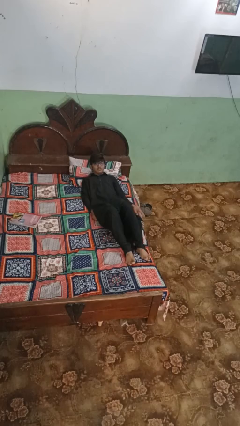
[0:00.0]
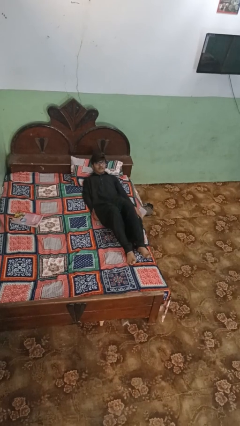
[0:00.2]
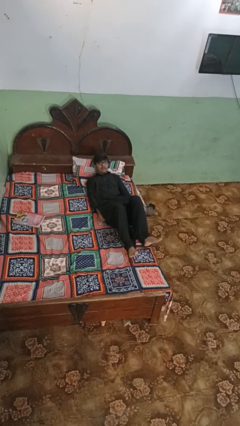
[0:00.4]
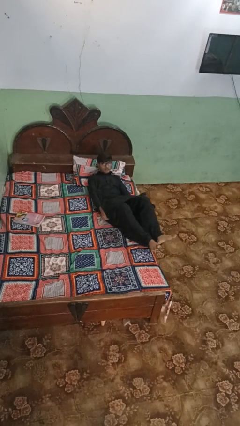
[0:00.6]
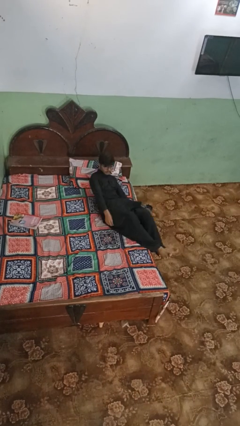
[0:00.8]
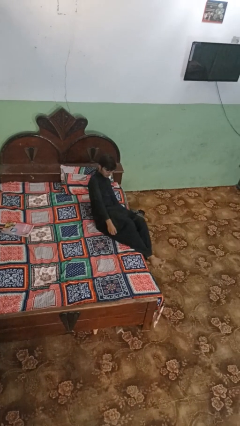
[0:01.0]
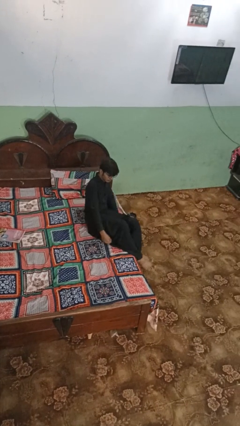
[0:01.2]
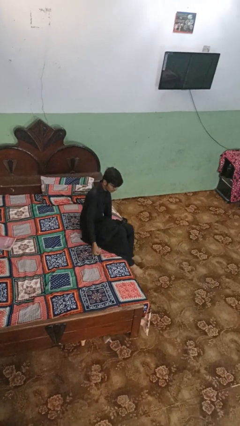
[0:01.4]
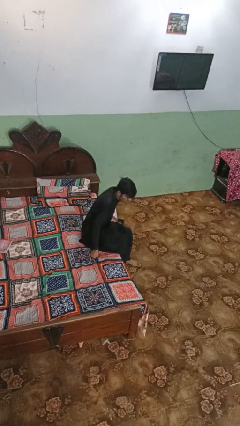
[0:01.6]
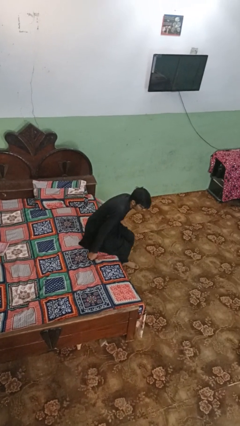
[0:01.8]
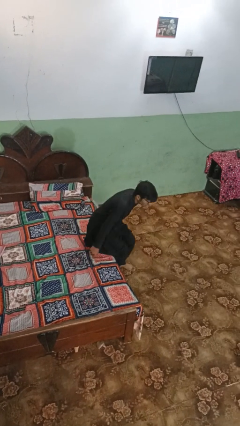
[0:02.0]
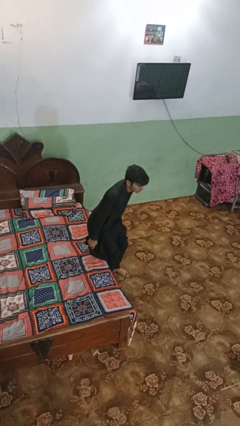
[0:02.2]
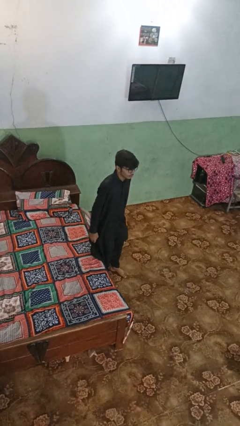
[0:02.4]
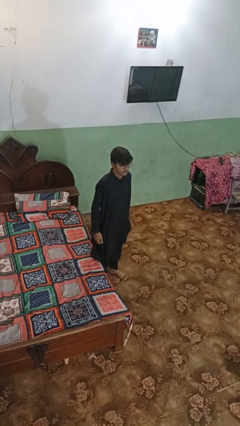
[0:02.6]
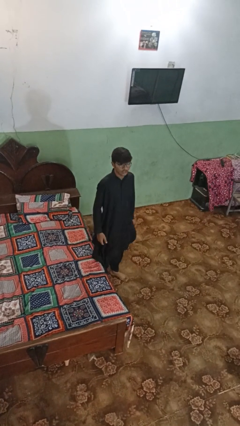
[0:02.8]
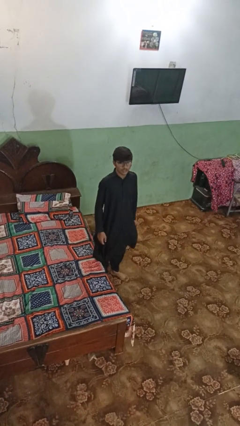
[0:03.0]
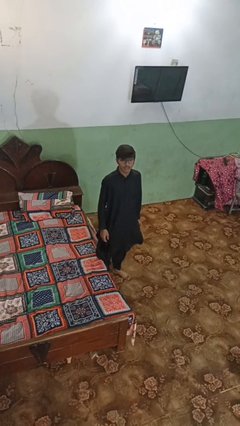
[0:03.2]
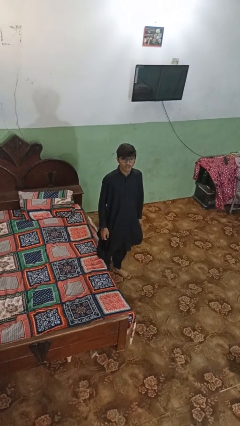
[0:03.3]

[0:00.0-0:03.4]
person stands up

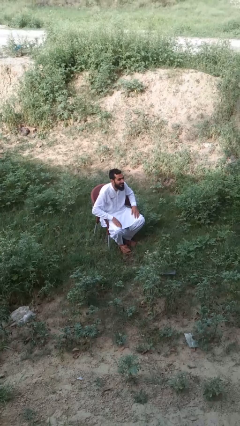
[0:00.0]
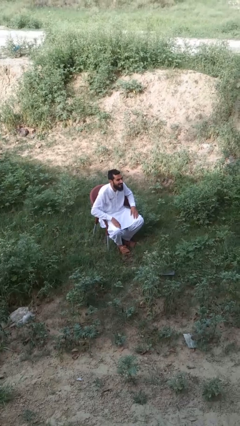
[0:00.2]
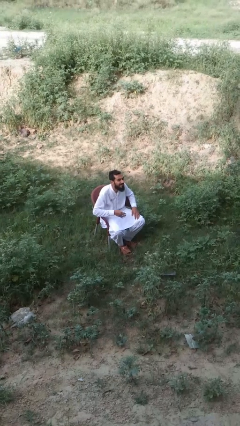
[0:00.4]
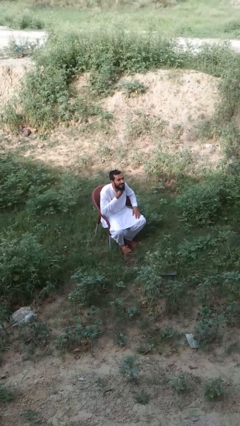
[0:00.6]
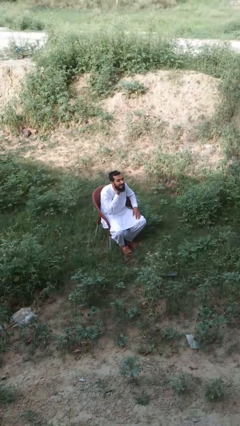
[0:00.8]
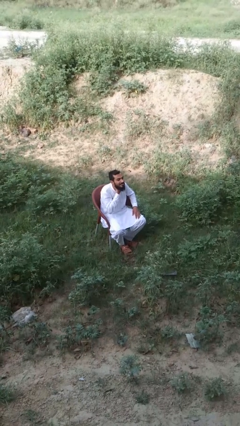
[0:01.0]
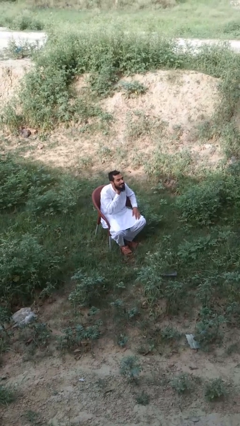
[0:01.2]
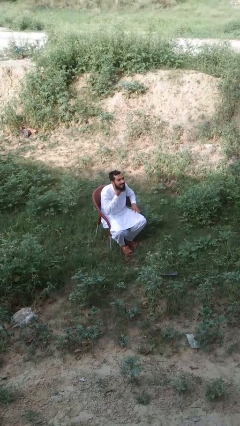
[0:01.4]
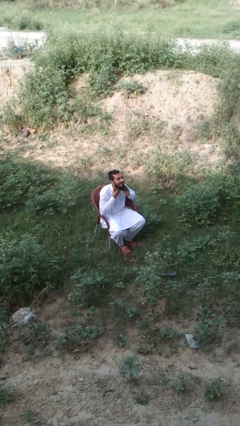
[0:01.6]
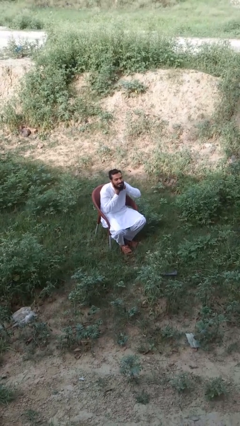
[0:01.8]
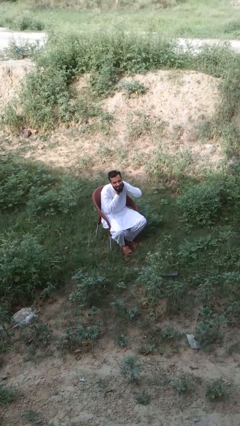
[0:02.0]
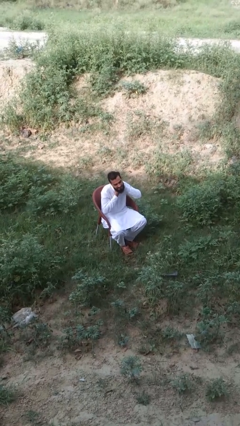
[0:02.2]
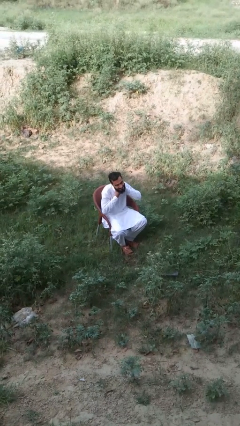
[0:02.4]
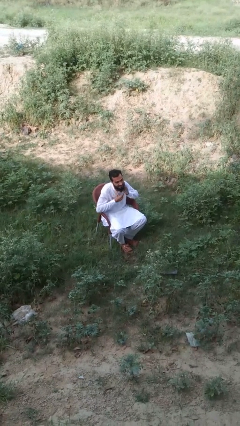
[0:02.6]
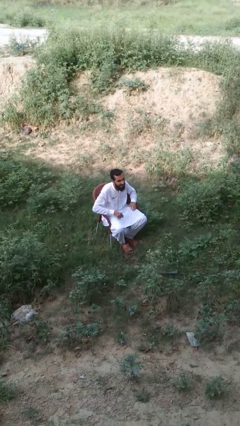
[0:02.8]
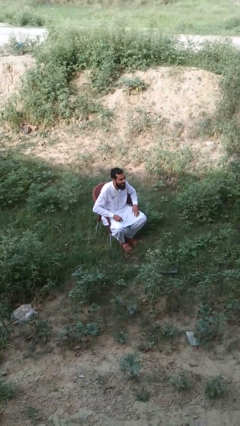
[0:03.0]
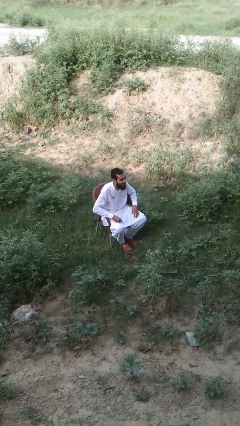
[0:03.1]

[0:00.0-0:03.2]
person rubs neck

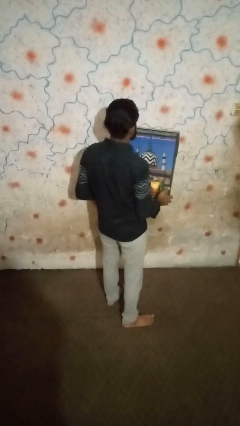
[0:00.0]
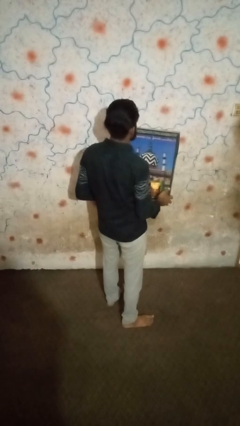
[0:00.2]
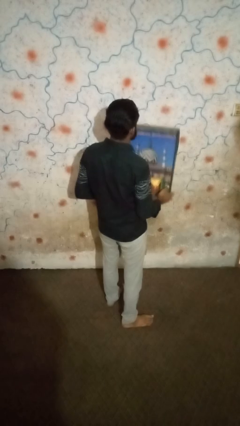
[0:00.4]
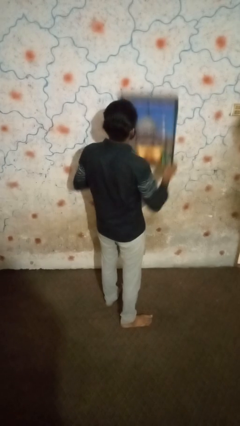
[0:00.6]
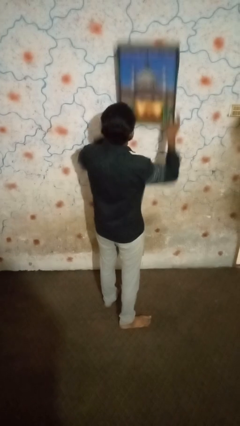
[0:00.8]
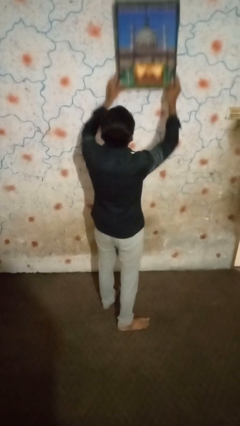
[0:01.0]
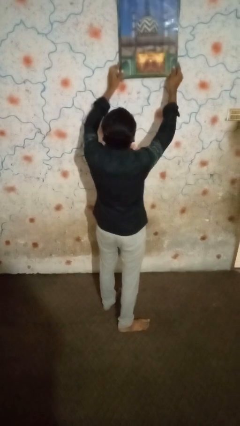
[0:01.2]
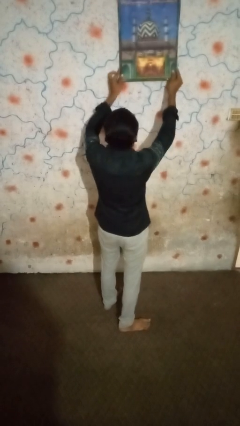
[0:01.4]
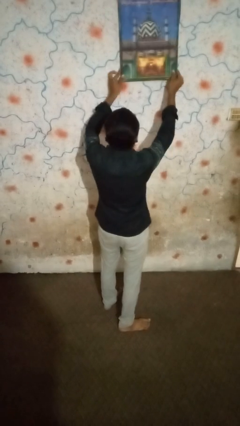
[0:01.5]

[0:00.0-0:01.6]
person puts up picture frame

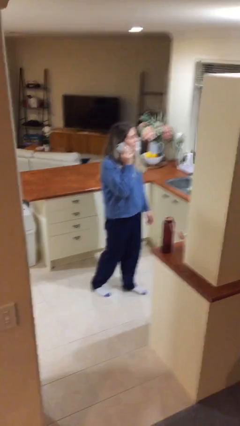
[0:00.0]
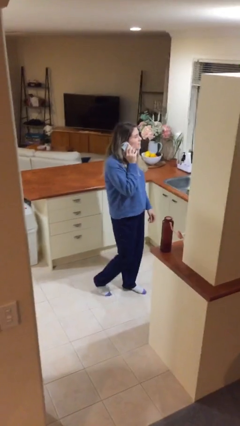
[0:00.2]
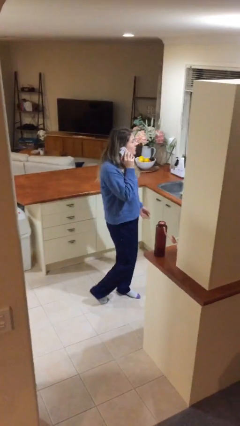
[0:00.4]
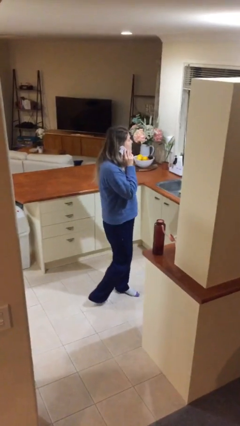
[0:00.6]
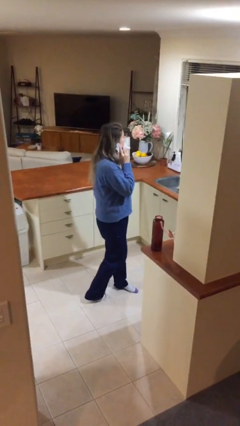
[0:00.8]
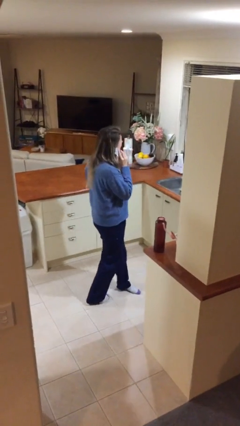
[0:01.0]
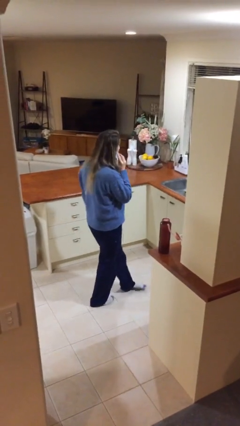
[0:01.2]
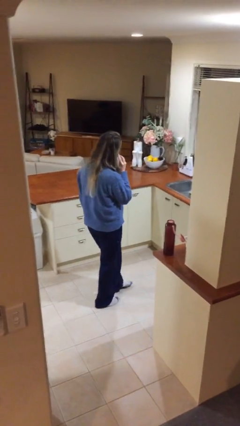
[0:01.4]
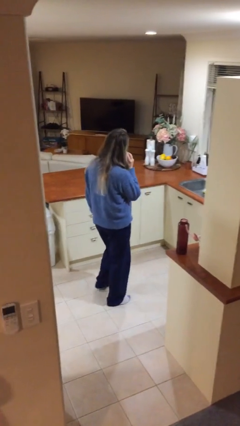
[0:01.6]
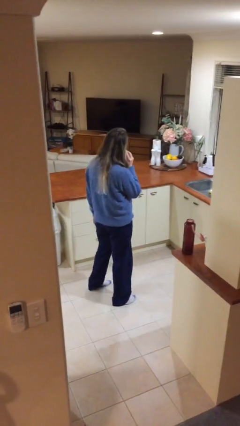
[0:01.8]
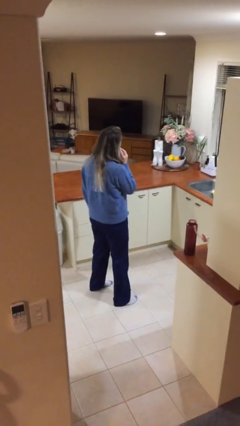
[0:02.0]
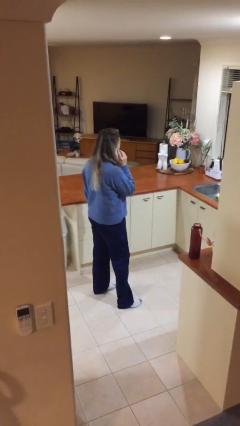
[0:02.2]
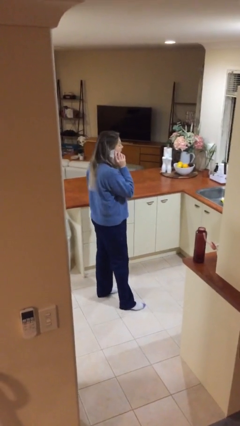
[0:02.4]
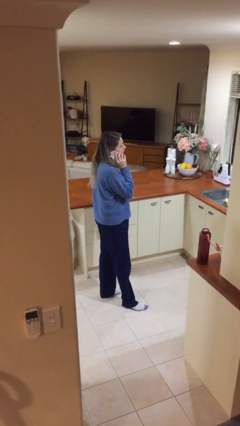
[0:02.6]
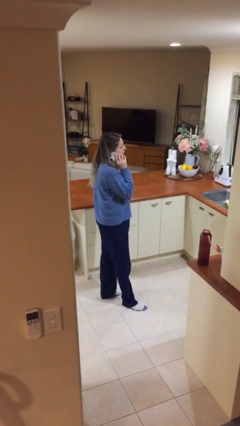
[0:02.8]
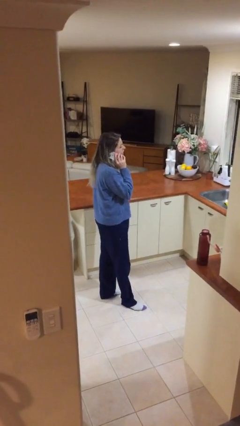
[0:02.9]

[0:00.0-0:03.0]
person talks on phone

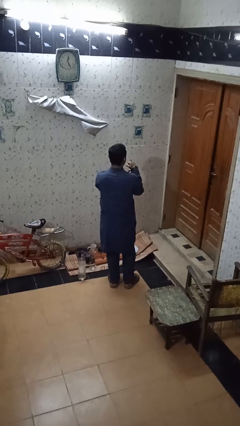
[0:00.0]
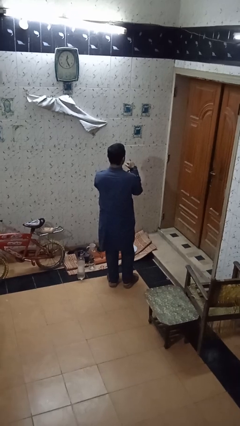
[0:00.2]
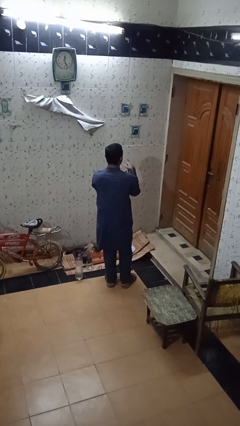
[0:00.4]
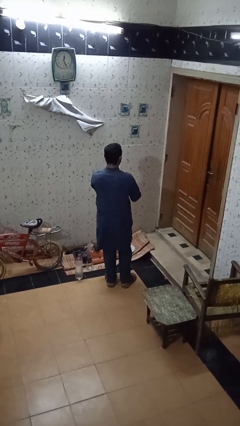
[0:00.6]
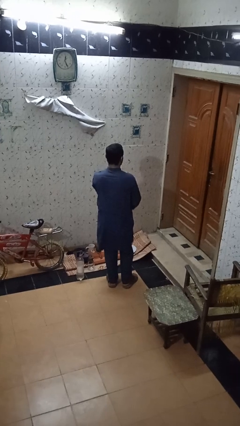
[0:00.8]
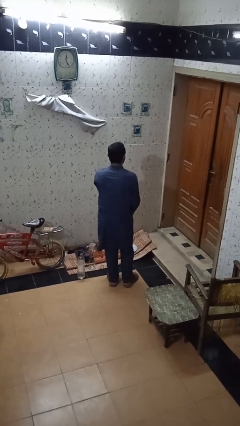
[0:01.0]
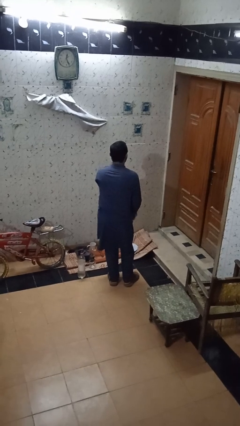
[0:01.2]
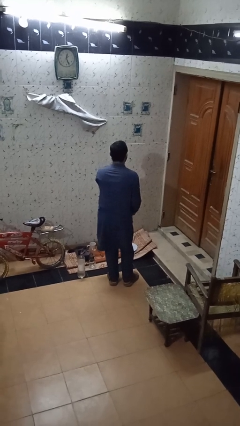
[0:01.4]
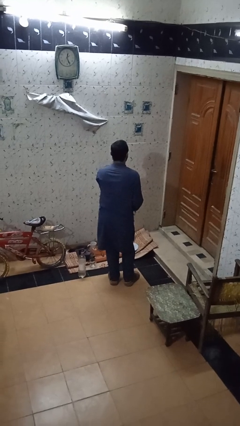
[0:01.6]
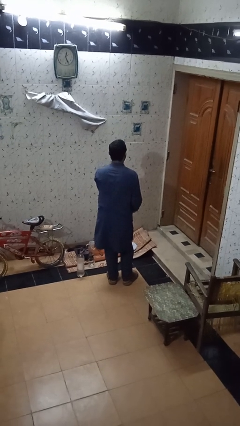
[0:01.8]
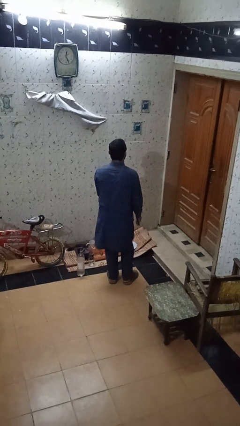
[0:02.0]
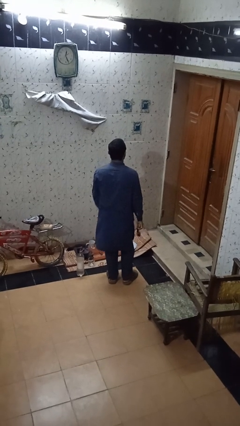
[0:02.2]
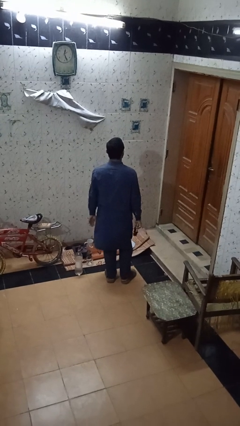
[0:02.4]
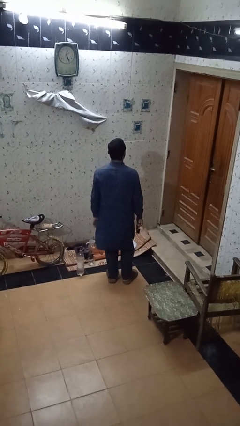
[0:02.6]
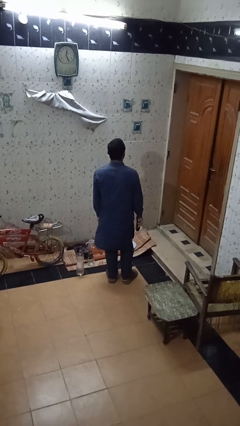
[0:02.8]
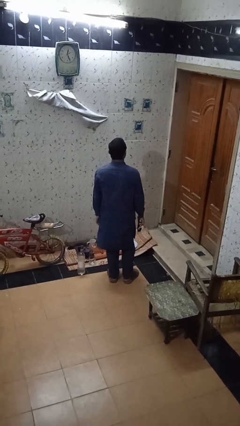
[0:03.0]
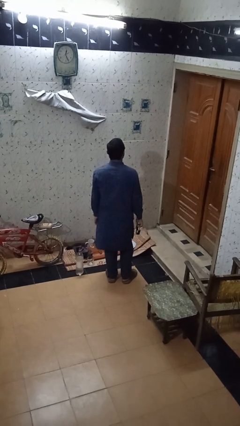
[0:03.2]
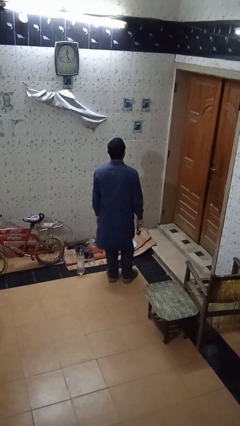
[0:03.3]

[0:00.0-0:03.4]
person takes off wristwatch

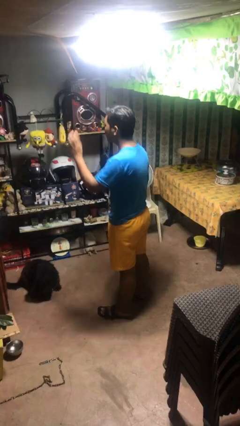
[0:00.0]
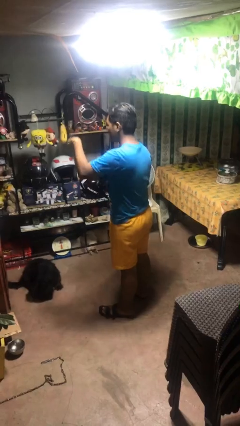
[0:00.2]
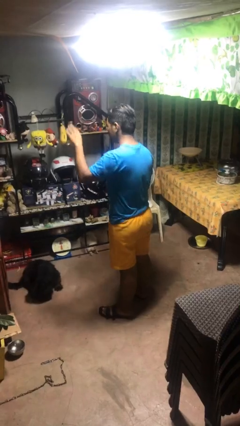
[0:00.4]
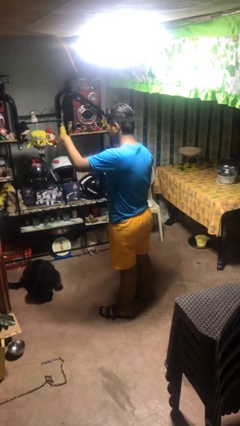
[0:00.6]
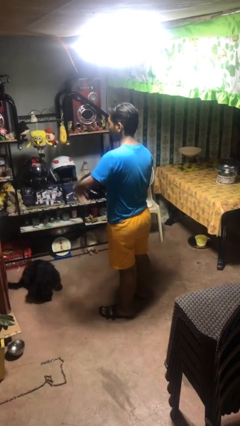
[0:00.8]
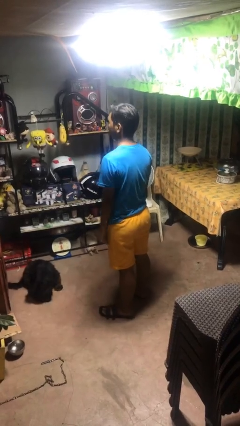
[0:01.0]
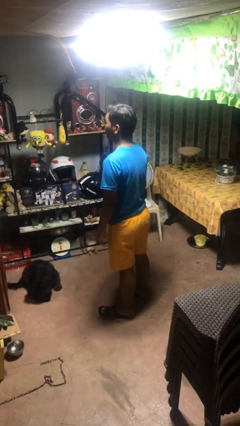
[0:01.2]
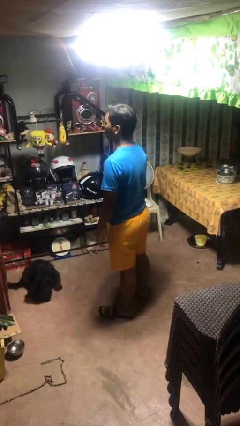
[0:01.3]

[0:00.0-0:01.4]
person gestures come here

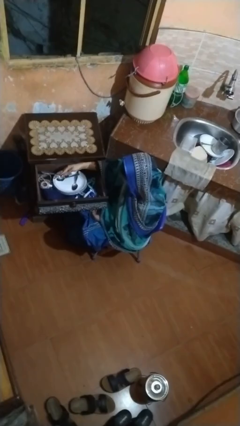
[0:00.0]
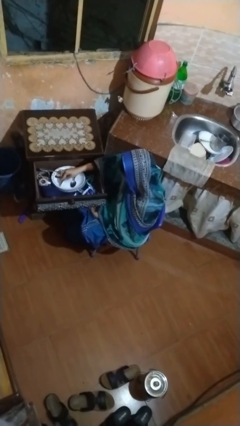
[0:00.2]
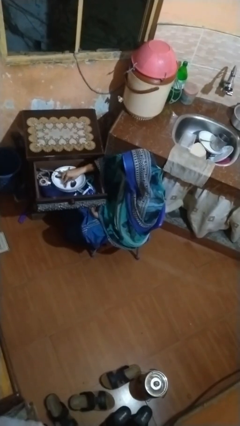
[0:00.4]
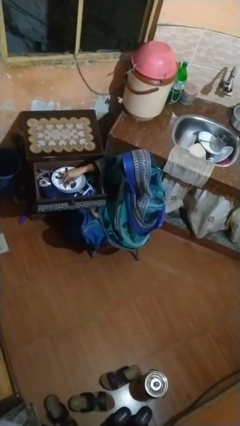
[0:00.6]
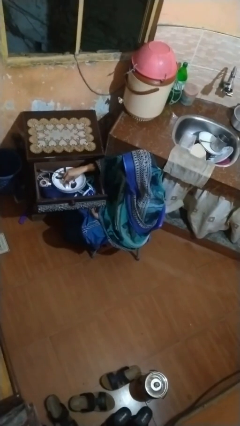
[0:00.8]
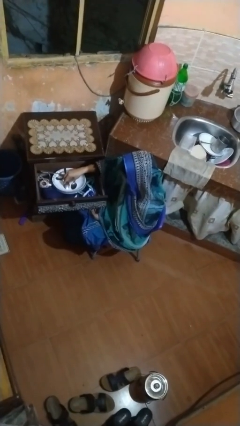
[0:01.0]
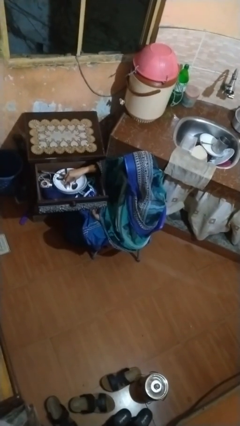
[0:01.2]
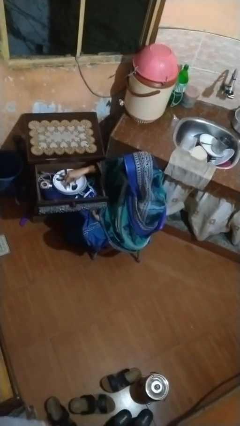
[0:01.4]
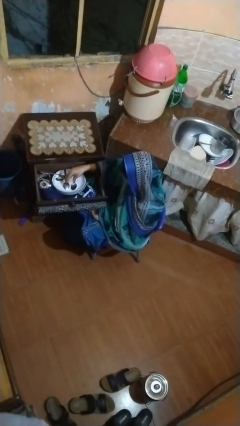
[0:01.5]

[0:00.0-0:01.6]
person puts object into kitchen drawer
